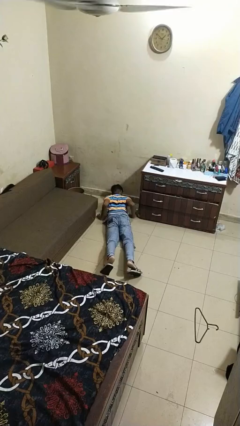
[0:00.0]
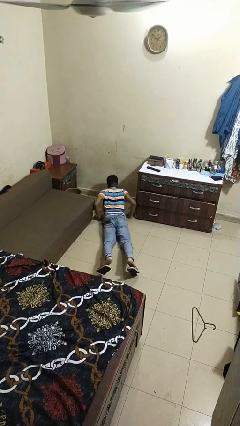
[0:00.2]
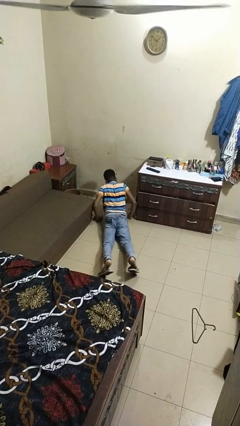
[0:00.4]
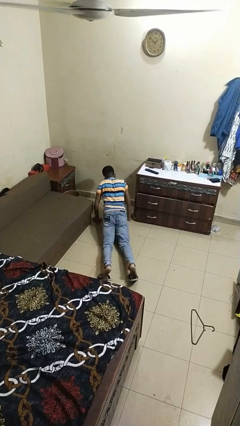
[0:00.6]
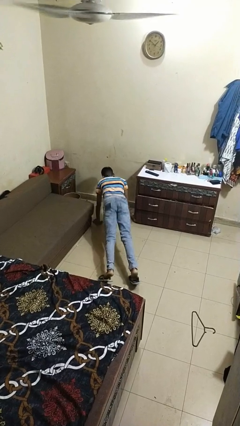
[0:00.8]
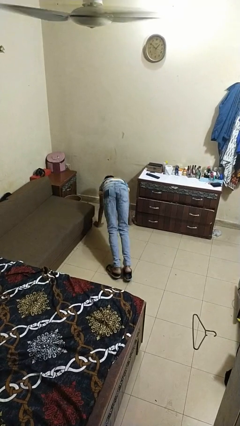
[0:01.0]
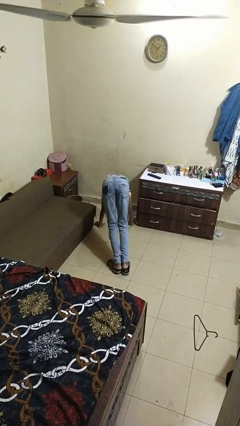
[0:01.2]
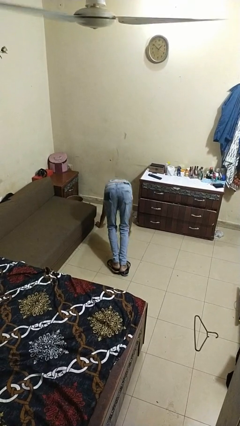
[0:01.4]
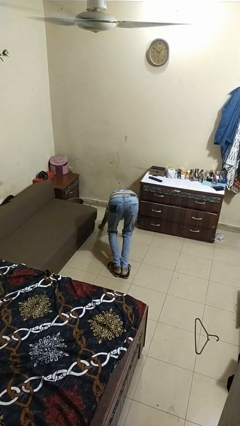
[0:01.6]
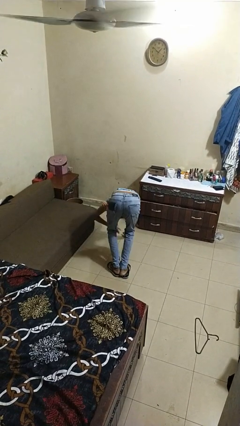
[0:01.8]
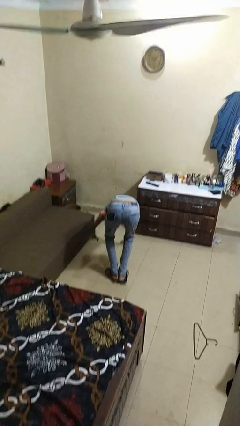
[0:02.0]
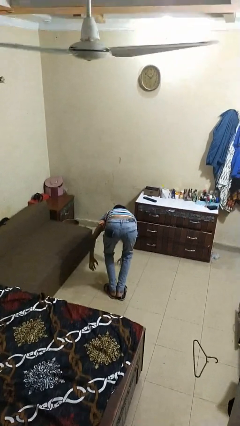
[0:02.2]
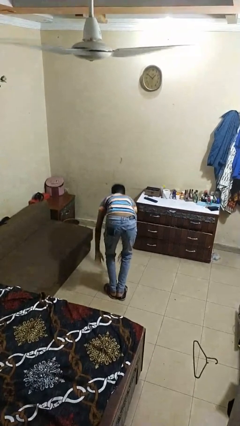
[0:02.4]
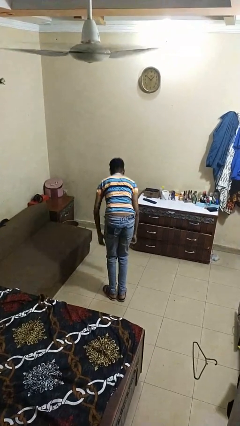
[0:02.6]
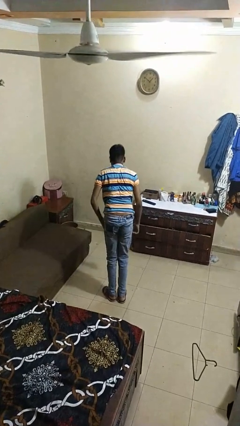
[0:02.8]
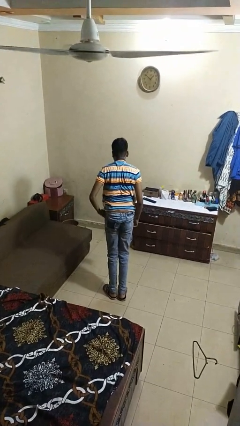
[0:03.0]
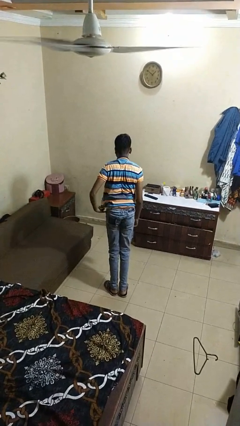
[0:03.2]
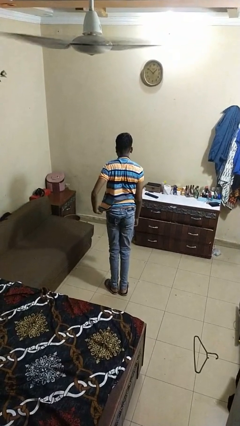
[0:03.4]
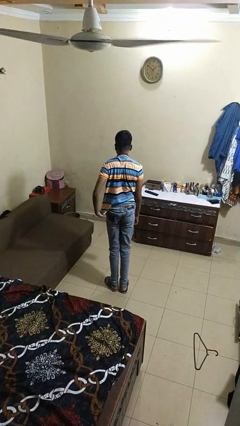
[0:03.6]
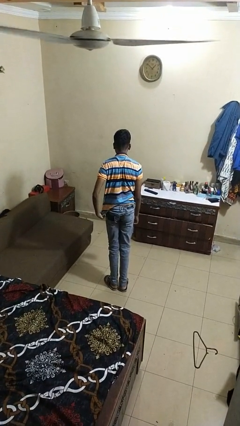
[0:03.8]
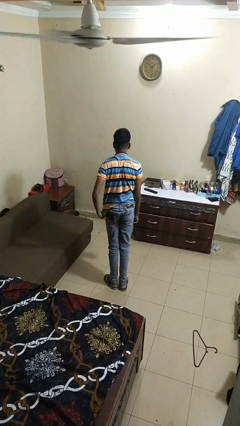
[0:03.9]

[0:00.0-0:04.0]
person stands up from floor

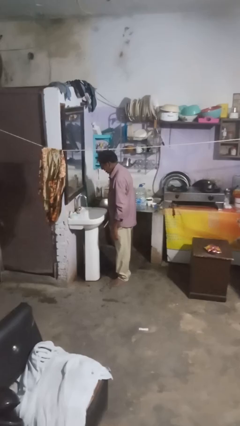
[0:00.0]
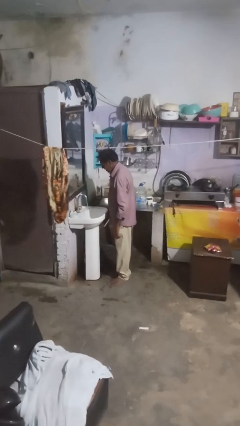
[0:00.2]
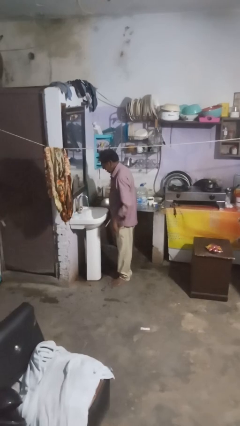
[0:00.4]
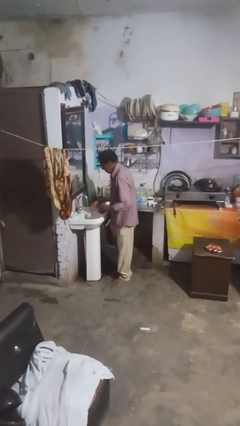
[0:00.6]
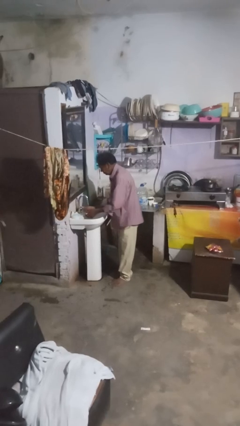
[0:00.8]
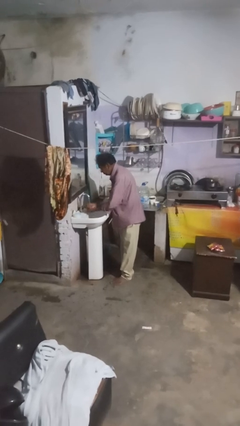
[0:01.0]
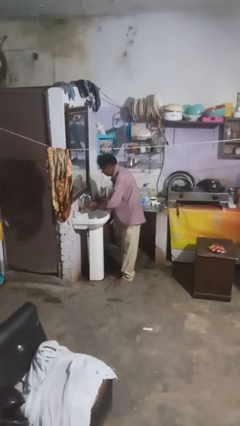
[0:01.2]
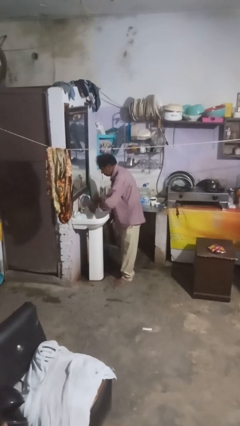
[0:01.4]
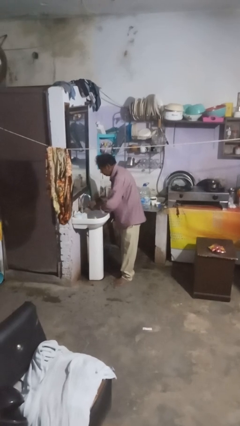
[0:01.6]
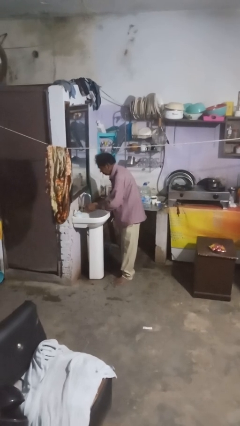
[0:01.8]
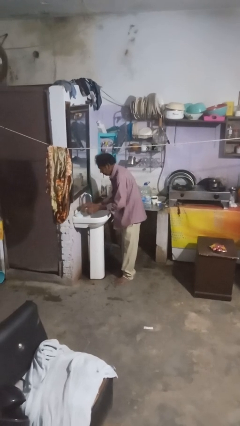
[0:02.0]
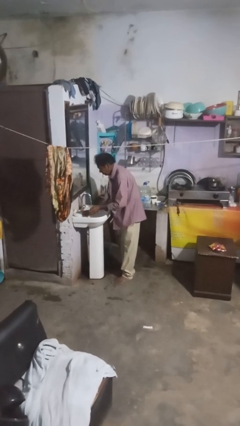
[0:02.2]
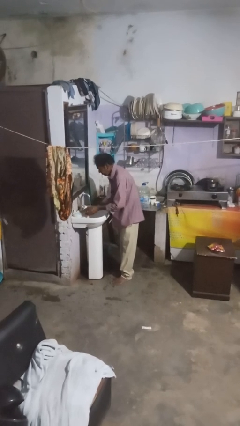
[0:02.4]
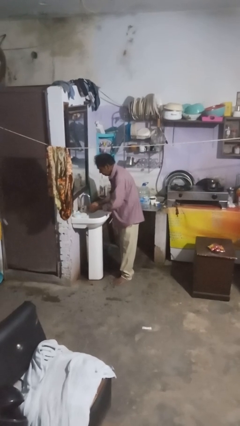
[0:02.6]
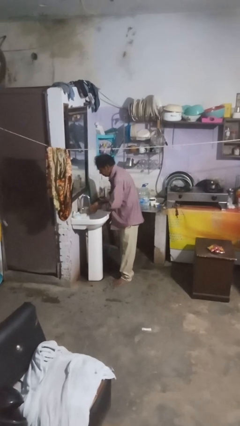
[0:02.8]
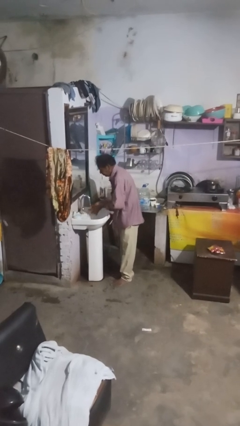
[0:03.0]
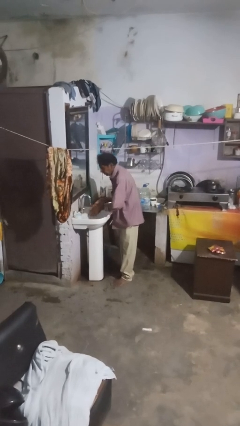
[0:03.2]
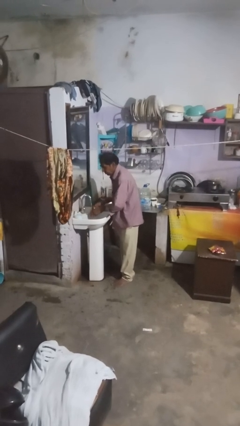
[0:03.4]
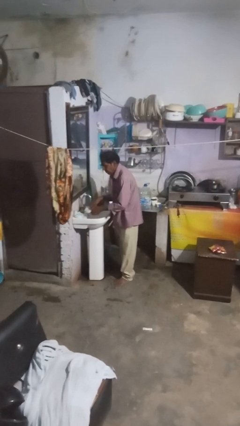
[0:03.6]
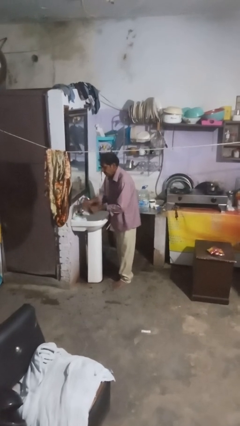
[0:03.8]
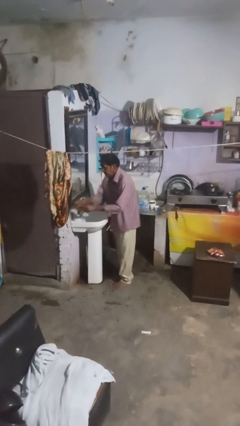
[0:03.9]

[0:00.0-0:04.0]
person washes hands

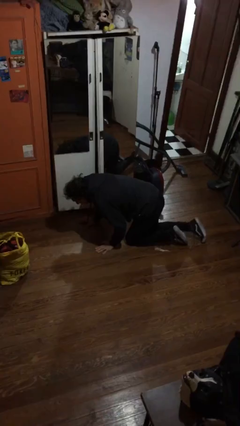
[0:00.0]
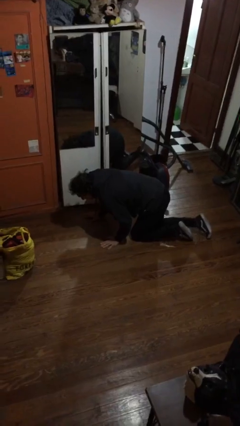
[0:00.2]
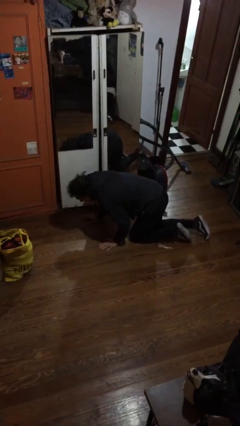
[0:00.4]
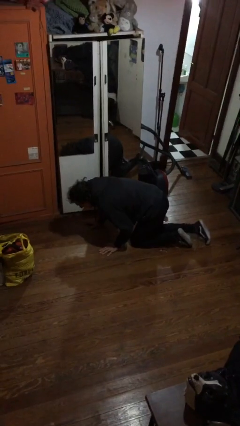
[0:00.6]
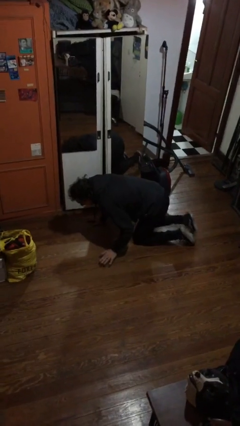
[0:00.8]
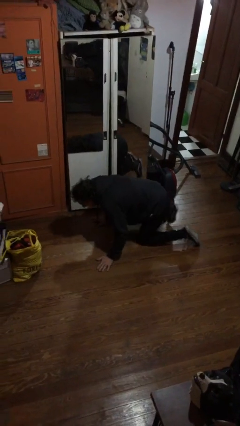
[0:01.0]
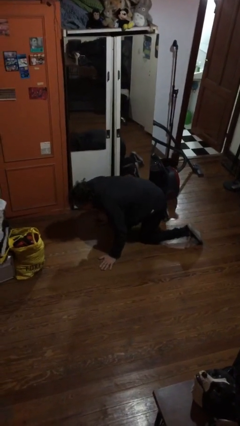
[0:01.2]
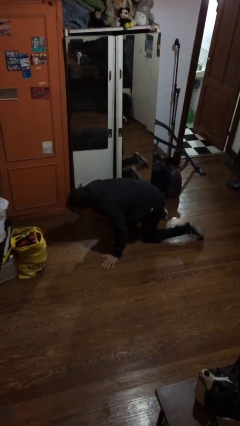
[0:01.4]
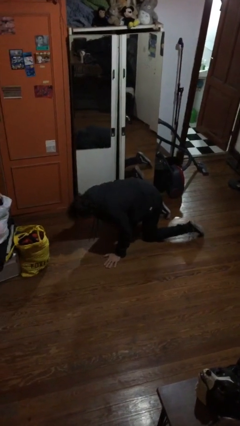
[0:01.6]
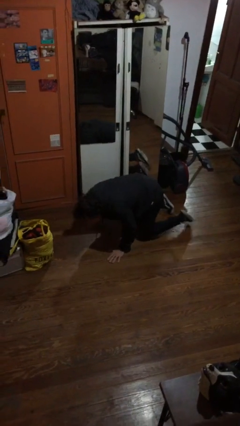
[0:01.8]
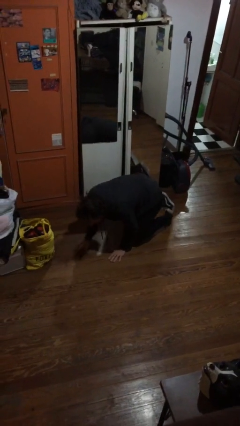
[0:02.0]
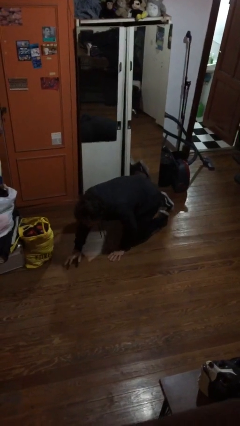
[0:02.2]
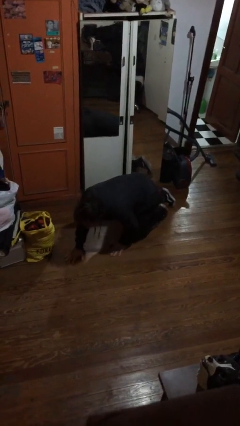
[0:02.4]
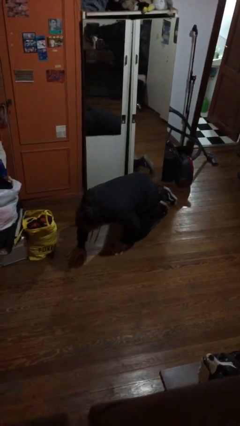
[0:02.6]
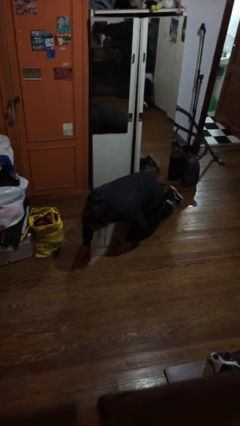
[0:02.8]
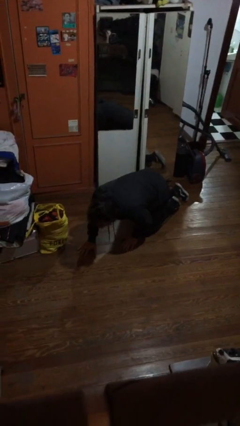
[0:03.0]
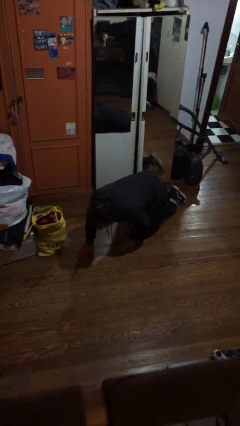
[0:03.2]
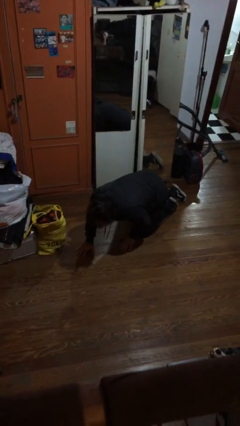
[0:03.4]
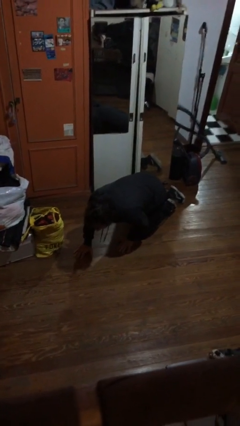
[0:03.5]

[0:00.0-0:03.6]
person crawls

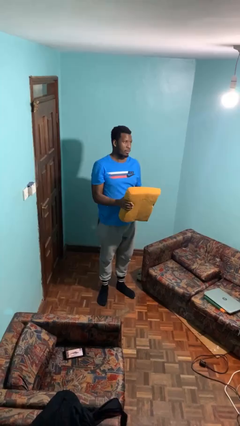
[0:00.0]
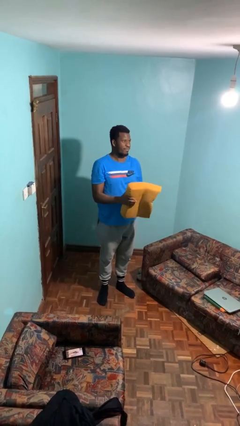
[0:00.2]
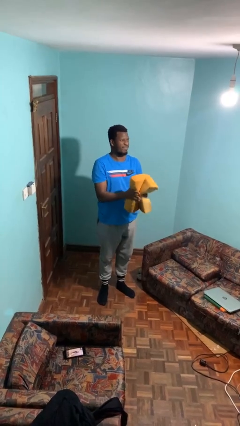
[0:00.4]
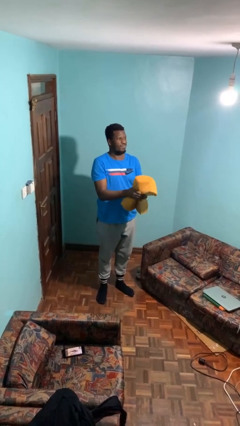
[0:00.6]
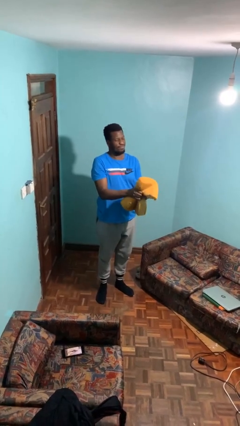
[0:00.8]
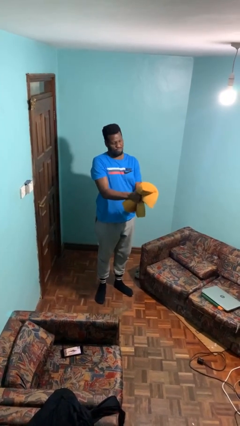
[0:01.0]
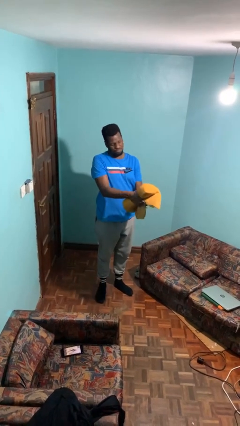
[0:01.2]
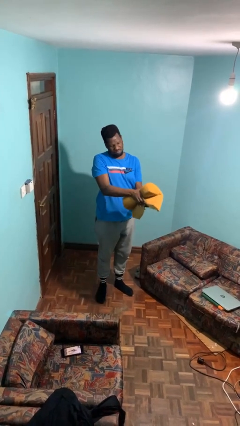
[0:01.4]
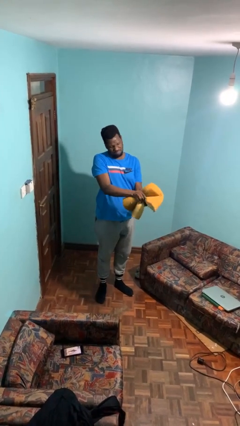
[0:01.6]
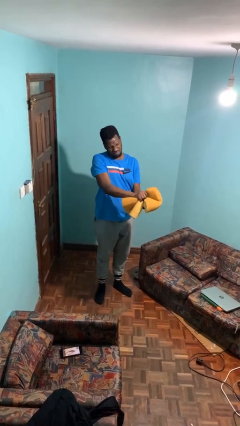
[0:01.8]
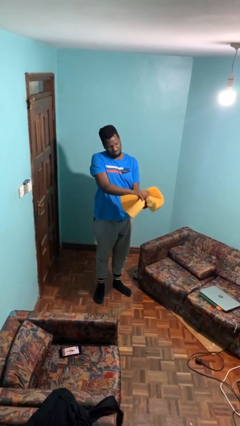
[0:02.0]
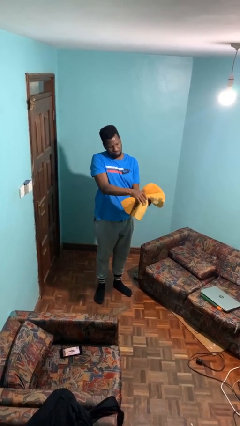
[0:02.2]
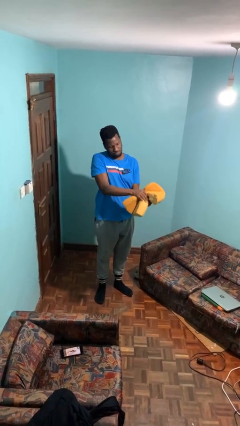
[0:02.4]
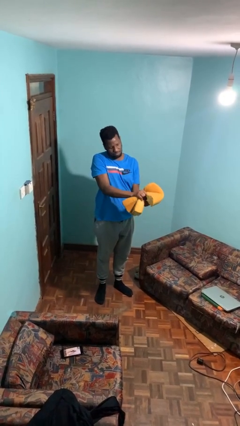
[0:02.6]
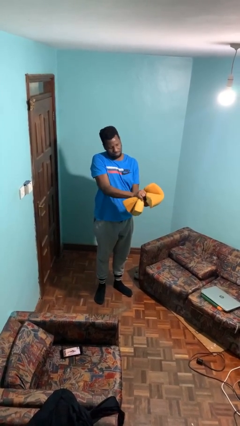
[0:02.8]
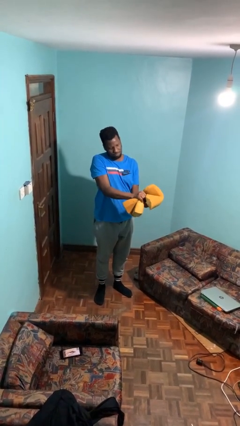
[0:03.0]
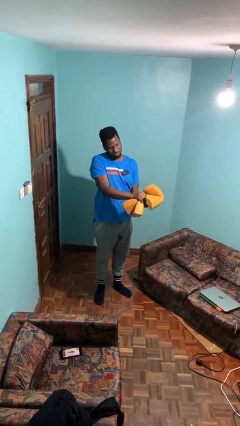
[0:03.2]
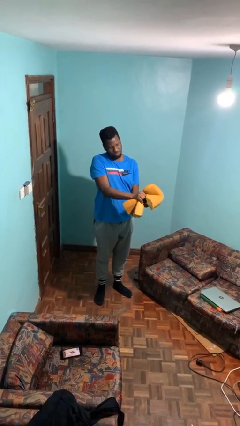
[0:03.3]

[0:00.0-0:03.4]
person squeezes object

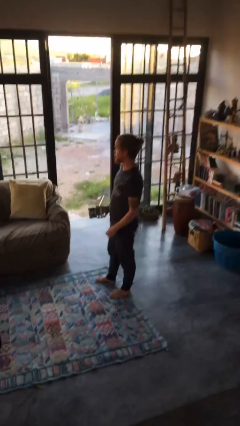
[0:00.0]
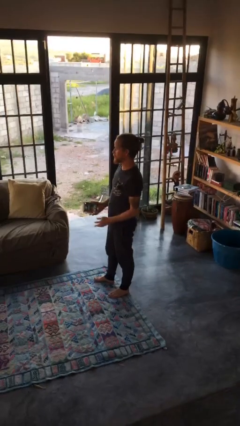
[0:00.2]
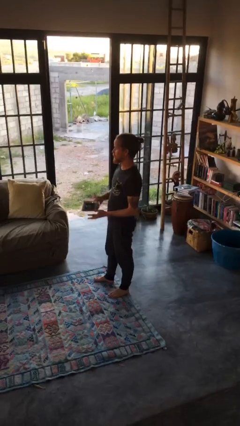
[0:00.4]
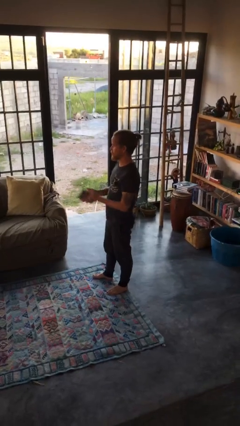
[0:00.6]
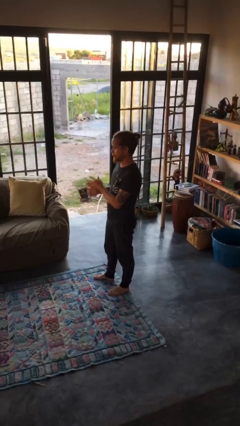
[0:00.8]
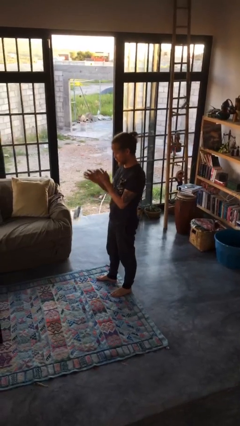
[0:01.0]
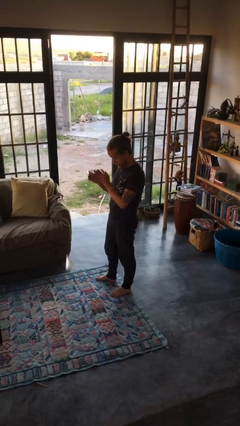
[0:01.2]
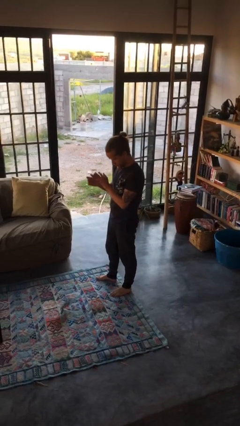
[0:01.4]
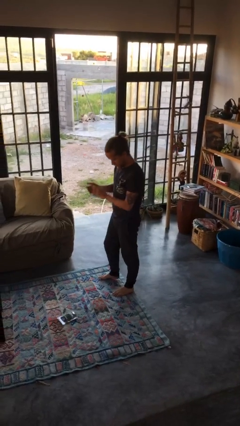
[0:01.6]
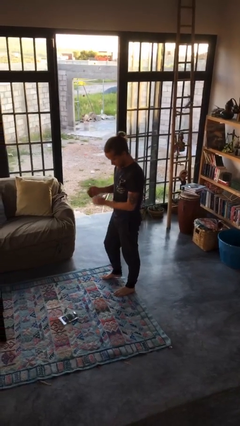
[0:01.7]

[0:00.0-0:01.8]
person drops object

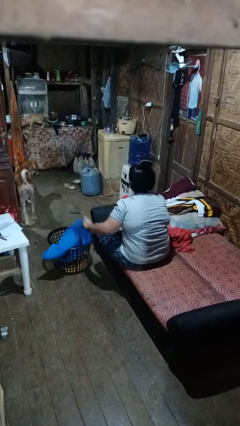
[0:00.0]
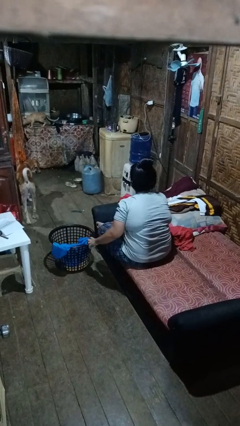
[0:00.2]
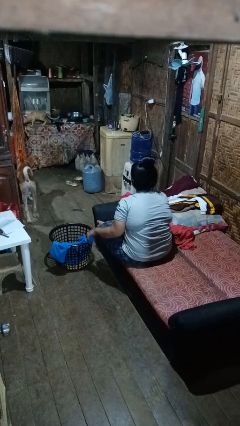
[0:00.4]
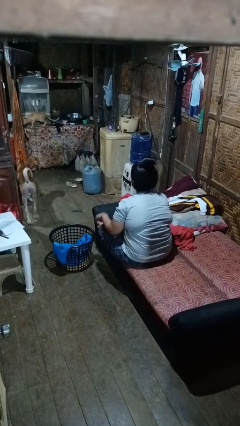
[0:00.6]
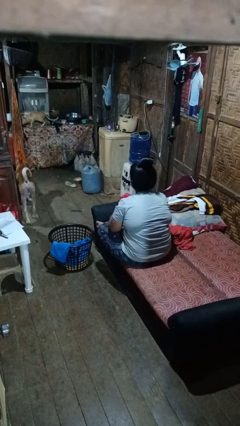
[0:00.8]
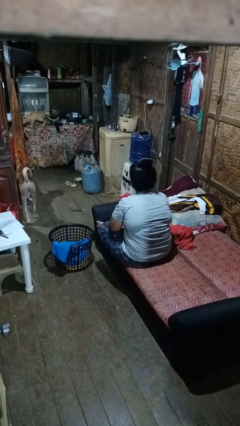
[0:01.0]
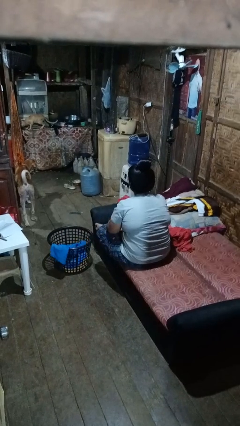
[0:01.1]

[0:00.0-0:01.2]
person puts object into basket
